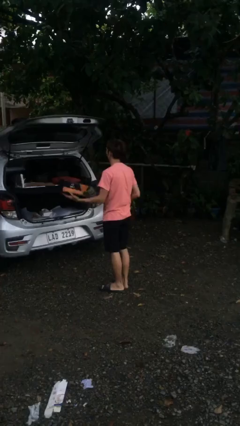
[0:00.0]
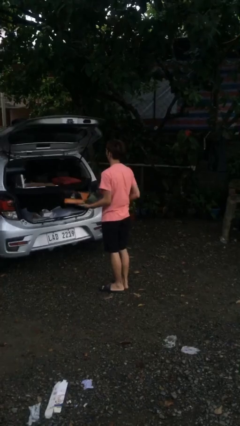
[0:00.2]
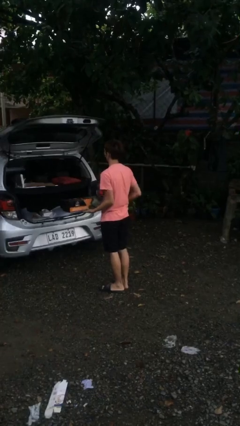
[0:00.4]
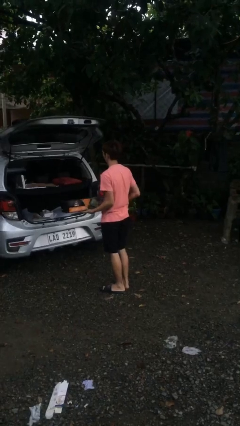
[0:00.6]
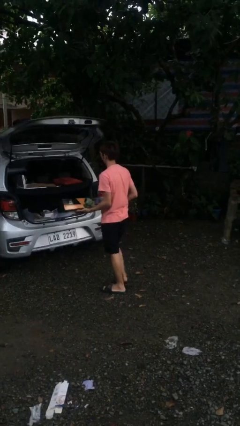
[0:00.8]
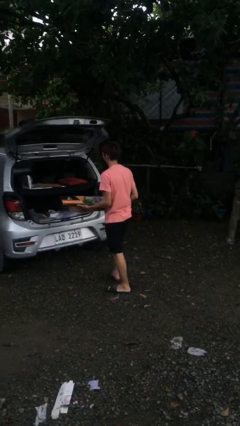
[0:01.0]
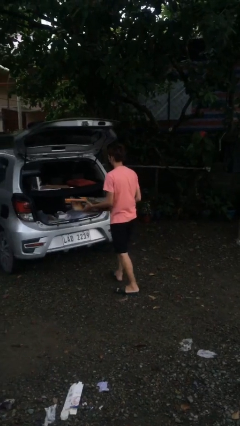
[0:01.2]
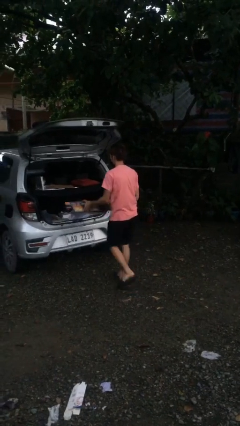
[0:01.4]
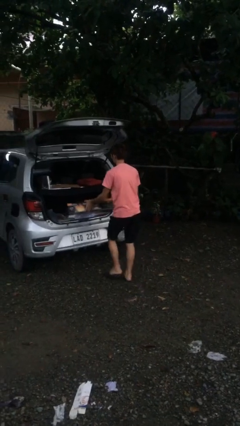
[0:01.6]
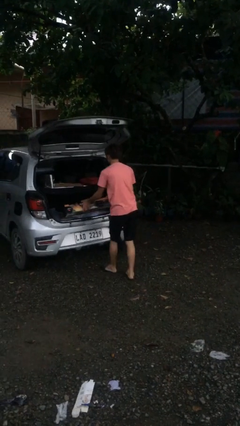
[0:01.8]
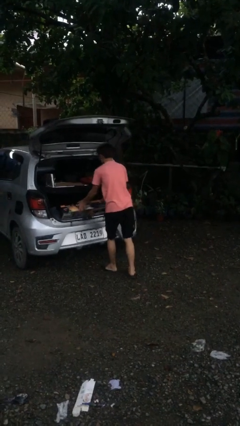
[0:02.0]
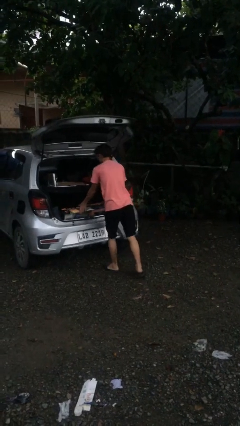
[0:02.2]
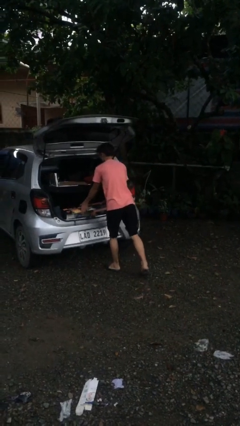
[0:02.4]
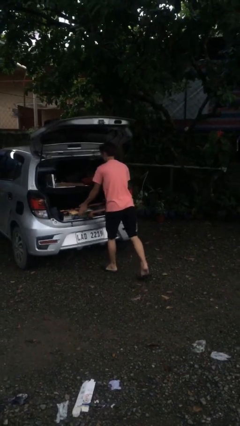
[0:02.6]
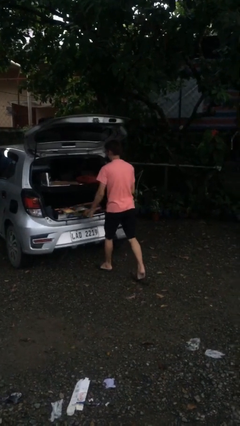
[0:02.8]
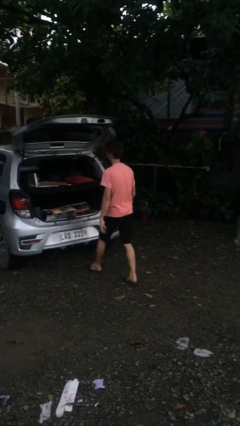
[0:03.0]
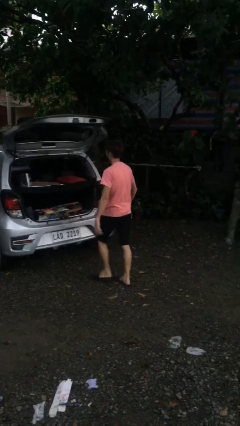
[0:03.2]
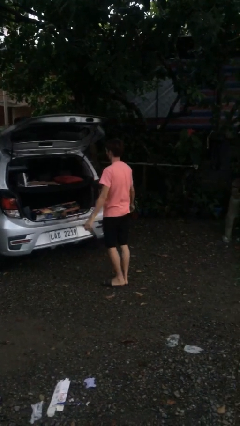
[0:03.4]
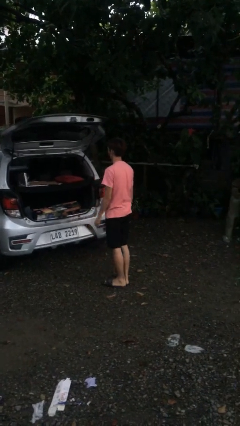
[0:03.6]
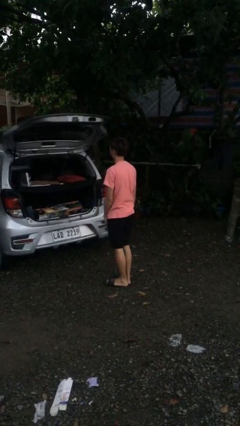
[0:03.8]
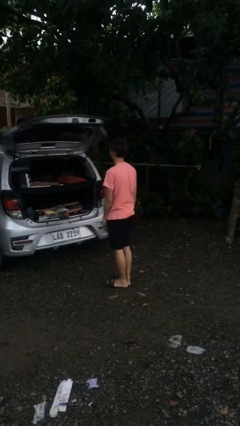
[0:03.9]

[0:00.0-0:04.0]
person loads car

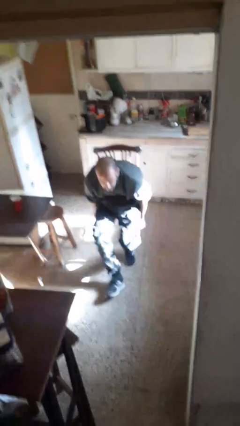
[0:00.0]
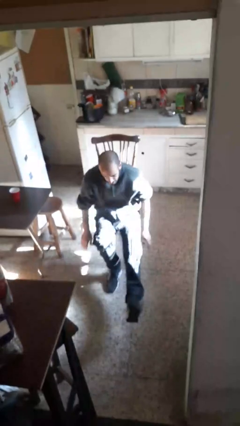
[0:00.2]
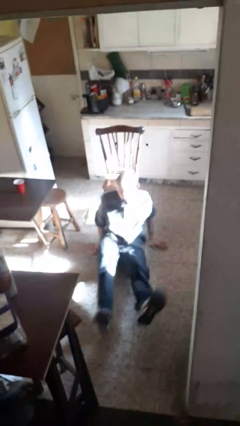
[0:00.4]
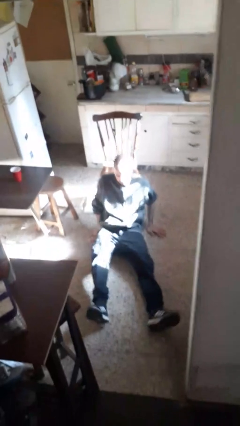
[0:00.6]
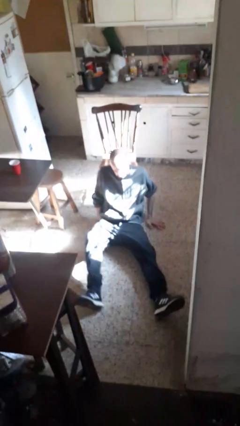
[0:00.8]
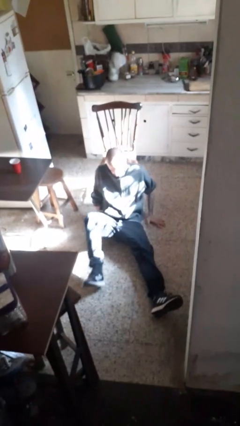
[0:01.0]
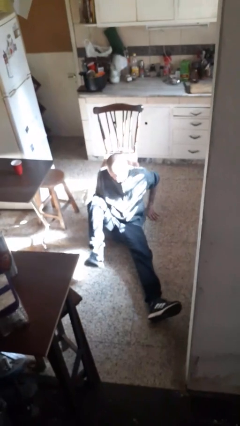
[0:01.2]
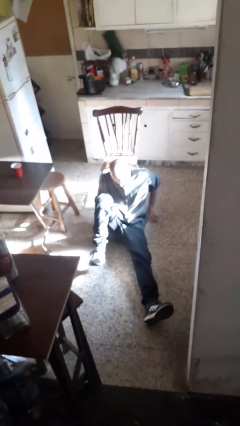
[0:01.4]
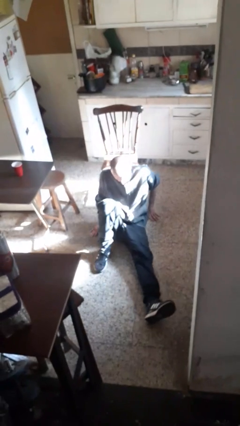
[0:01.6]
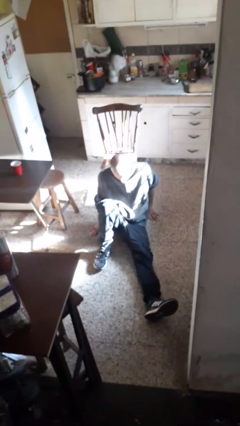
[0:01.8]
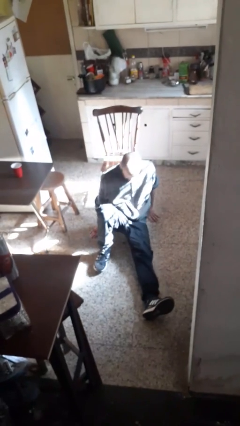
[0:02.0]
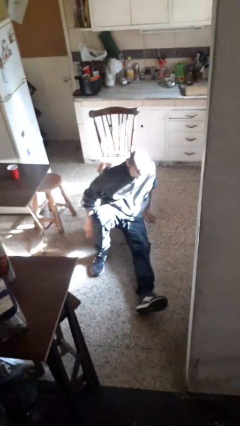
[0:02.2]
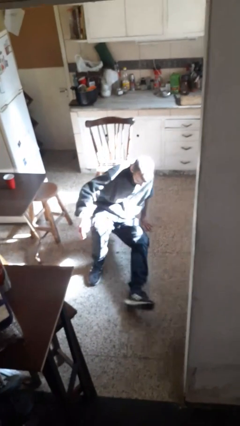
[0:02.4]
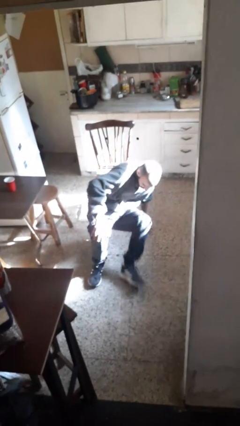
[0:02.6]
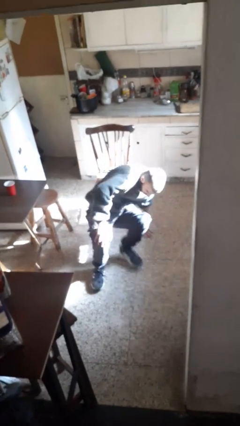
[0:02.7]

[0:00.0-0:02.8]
person falls from chair

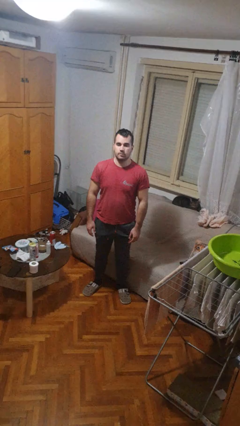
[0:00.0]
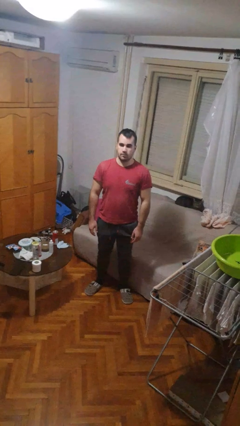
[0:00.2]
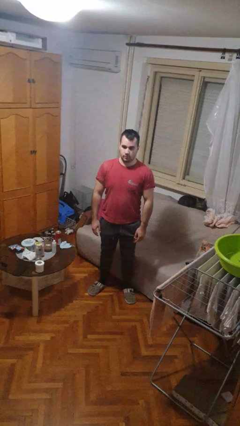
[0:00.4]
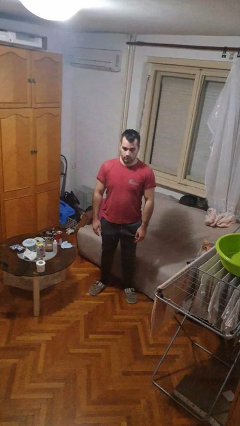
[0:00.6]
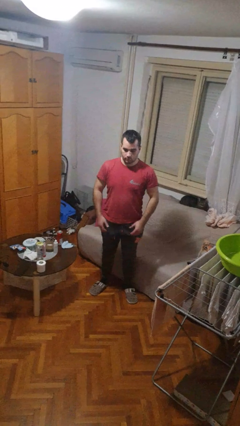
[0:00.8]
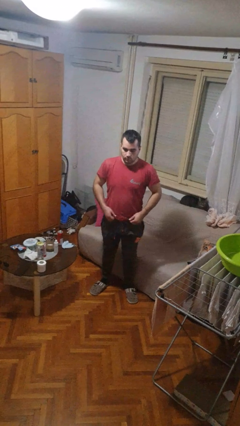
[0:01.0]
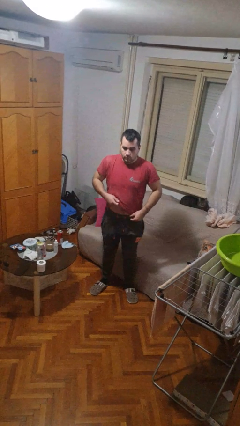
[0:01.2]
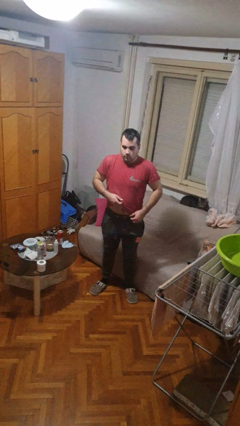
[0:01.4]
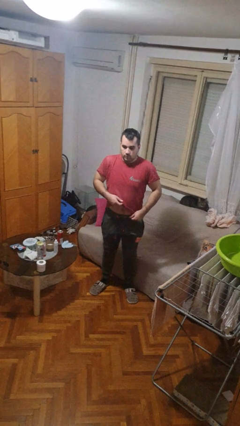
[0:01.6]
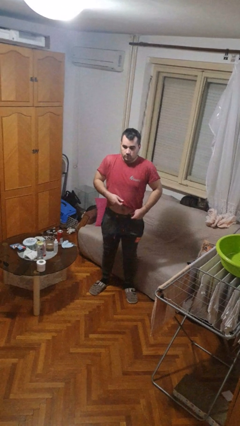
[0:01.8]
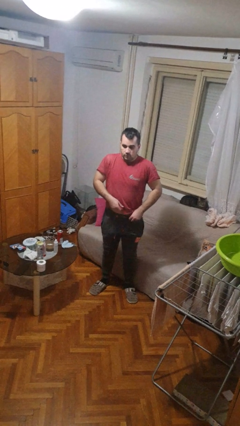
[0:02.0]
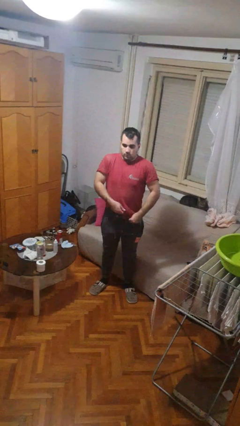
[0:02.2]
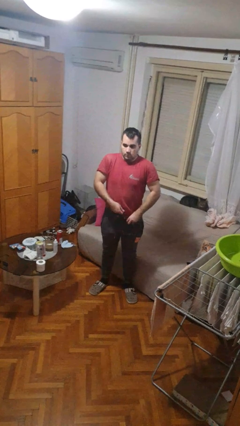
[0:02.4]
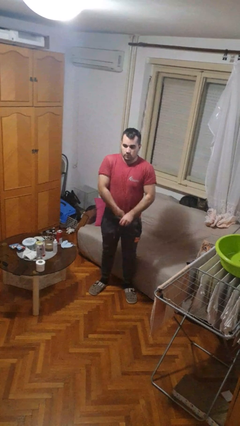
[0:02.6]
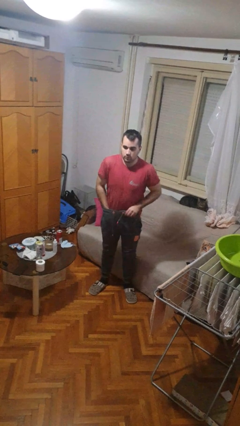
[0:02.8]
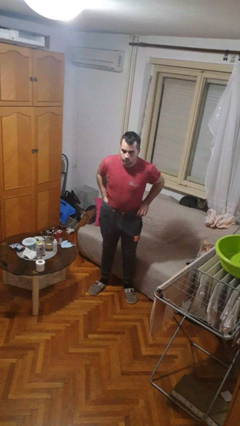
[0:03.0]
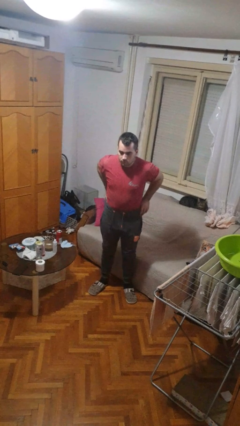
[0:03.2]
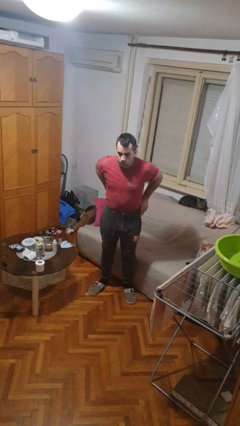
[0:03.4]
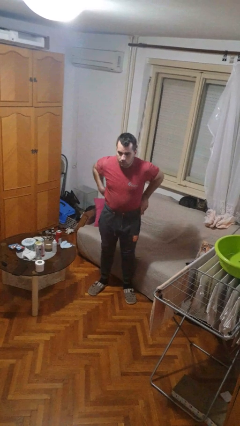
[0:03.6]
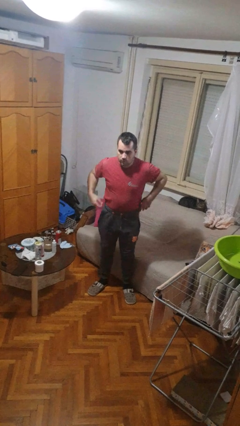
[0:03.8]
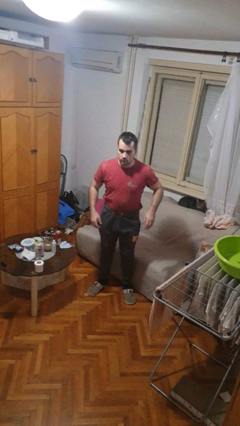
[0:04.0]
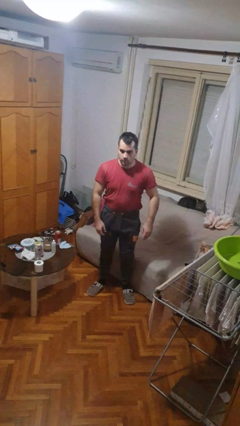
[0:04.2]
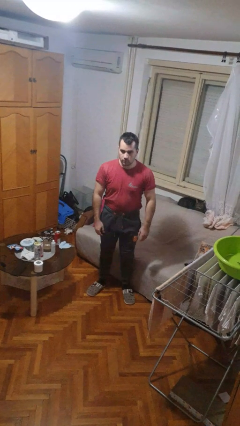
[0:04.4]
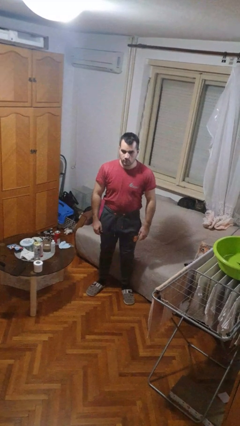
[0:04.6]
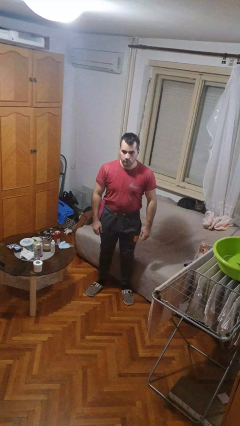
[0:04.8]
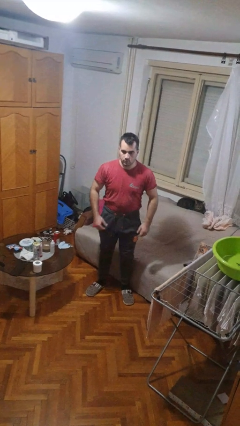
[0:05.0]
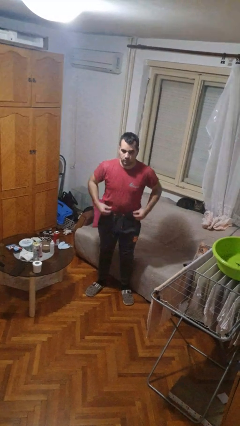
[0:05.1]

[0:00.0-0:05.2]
person tucks in shirt

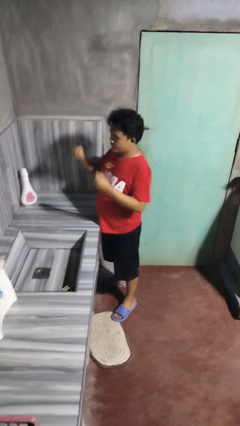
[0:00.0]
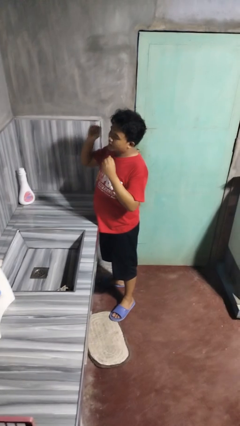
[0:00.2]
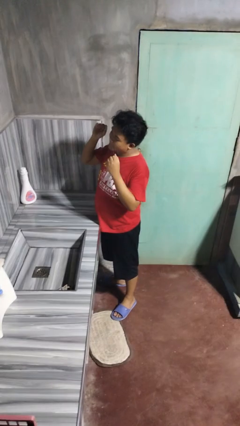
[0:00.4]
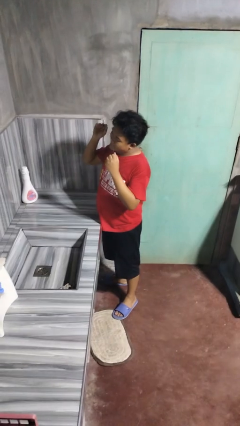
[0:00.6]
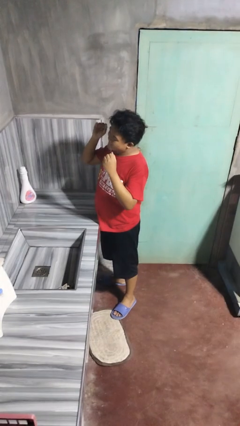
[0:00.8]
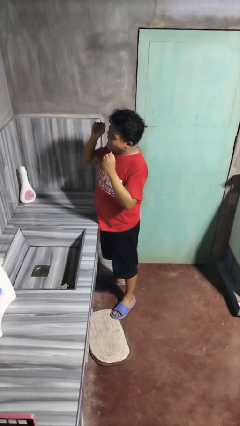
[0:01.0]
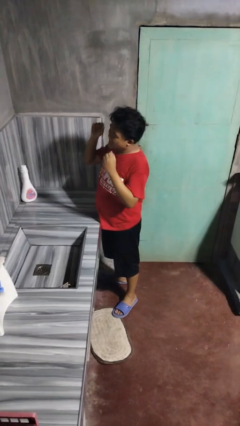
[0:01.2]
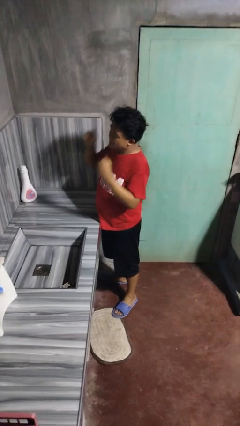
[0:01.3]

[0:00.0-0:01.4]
person flosses

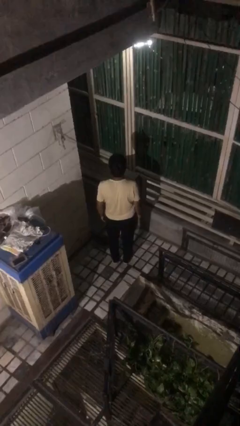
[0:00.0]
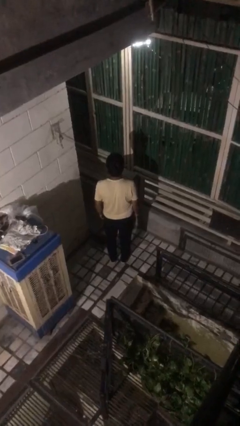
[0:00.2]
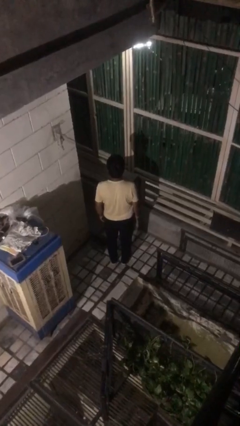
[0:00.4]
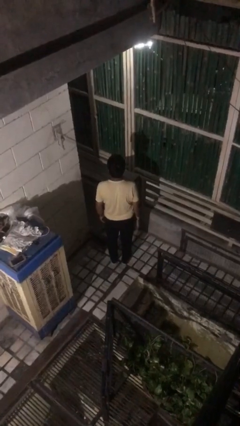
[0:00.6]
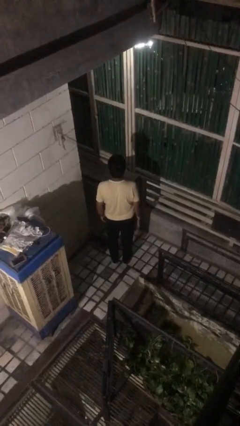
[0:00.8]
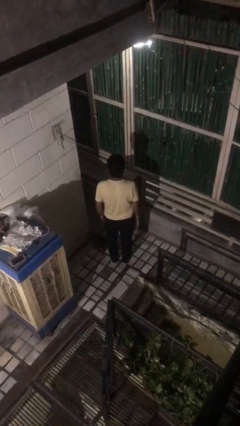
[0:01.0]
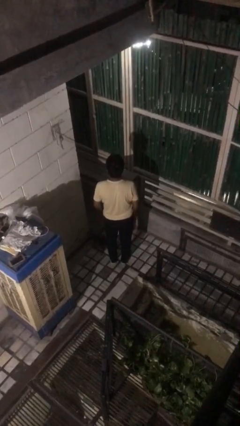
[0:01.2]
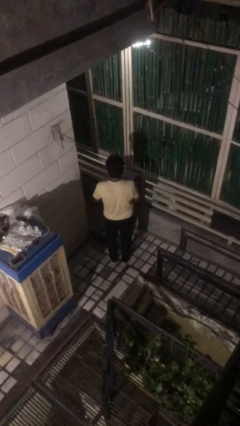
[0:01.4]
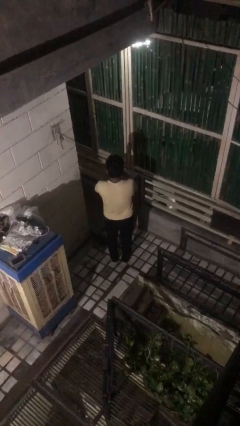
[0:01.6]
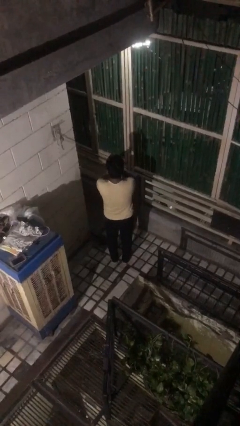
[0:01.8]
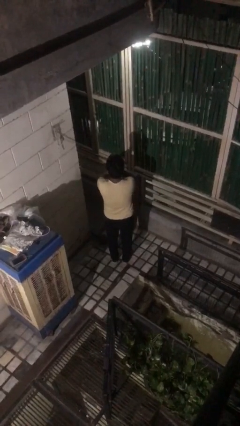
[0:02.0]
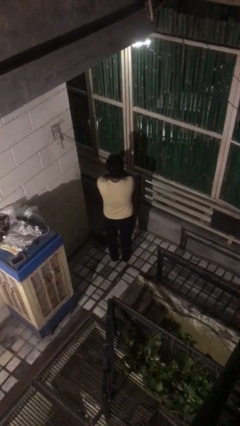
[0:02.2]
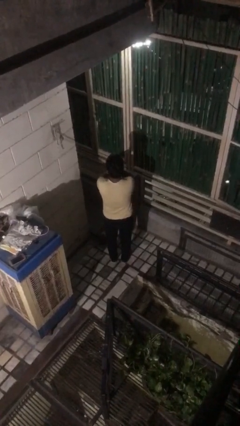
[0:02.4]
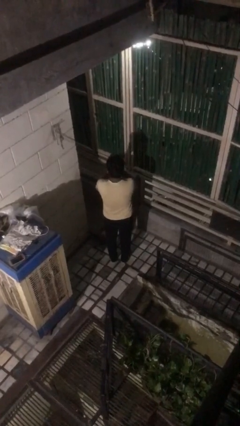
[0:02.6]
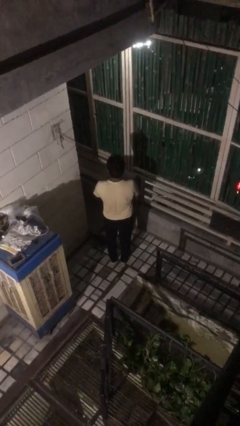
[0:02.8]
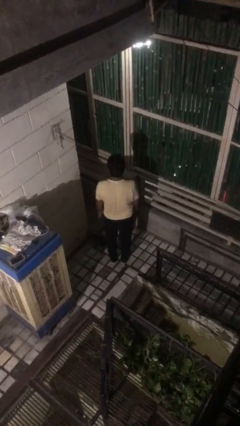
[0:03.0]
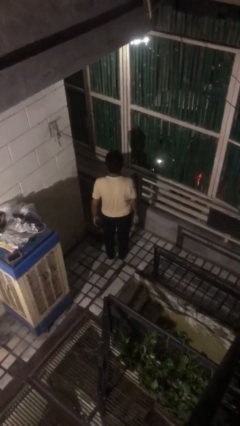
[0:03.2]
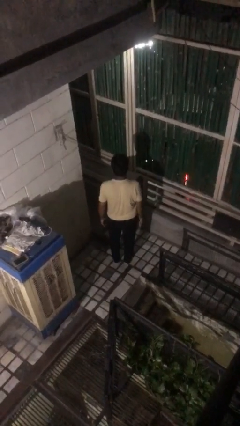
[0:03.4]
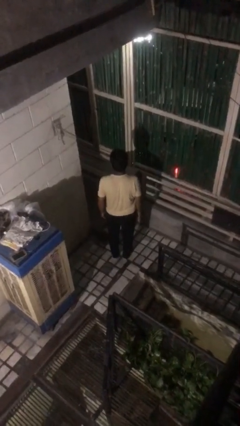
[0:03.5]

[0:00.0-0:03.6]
person covers face with hands

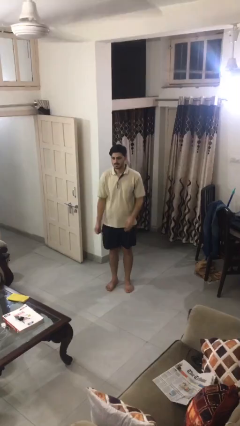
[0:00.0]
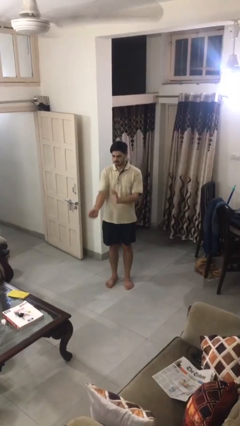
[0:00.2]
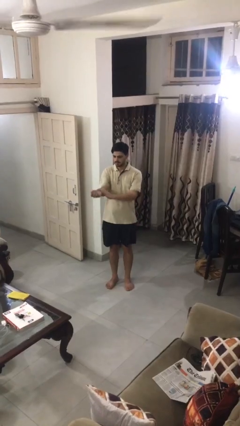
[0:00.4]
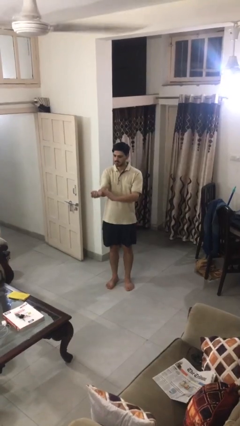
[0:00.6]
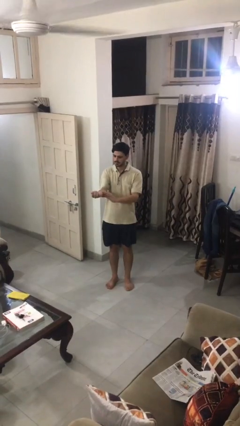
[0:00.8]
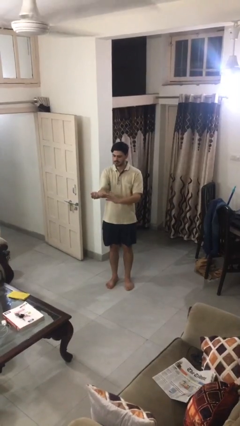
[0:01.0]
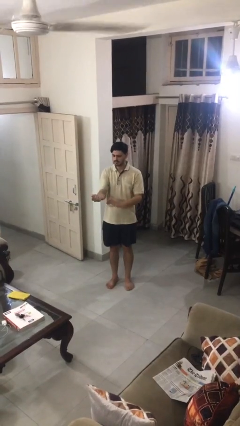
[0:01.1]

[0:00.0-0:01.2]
person swats bug
